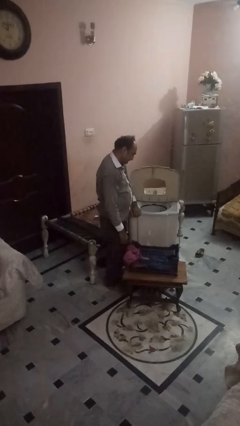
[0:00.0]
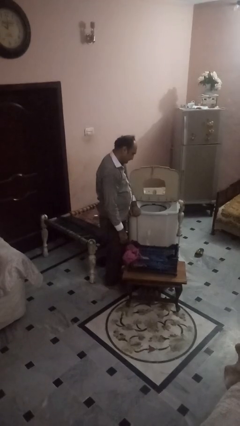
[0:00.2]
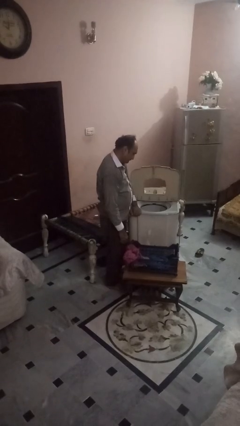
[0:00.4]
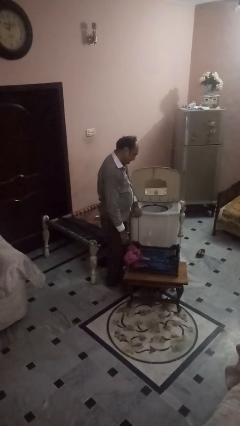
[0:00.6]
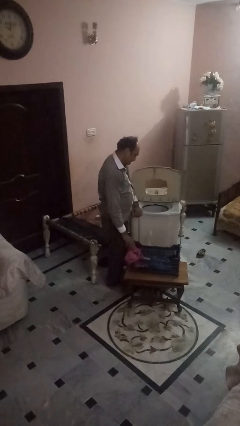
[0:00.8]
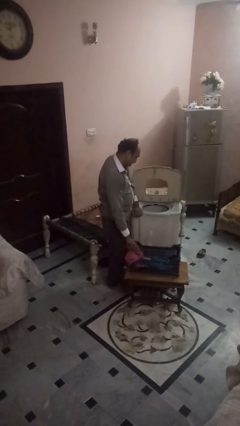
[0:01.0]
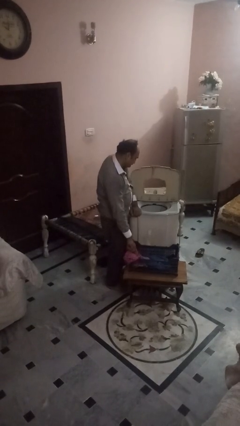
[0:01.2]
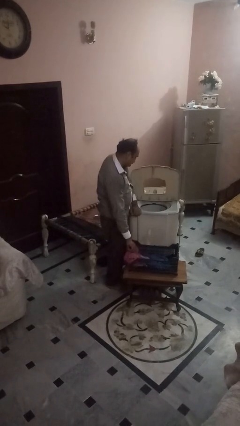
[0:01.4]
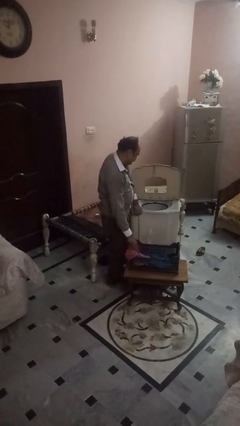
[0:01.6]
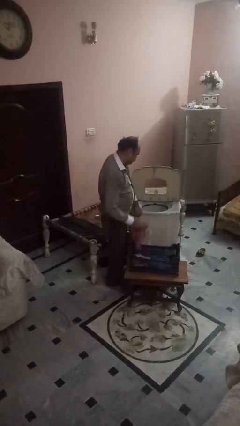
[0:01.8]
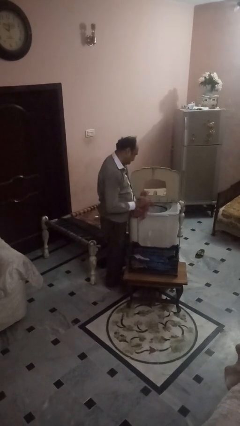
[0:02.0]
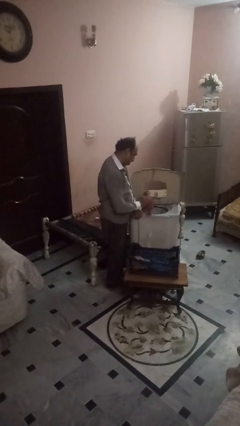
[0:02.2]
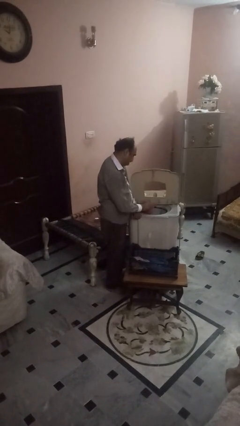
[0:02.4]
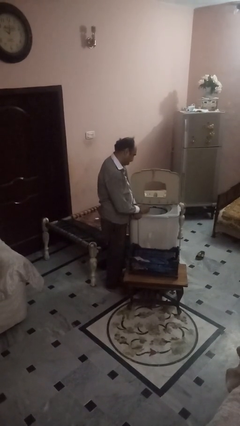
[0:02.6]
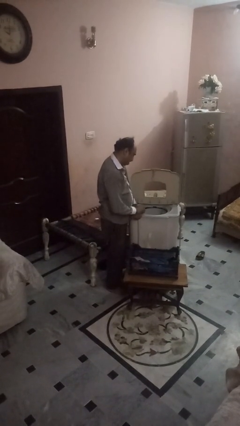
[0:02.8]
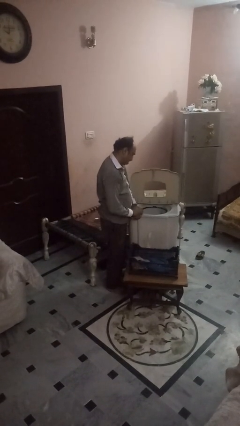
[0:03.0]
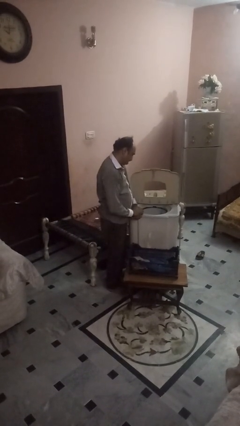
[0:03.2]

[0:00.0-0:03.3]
person loads dryer

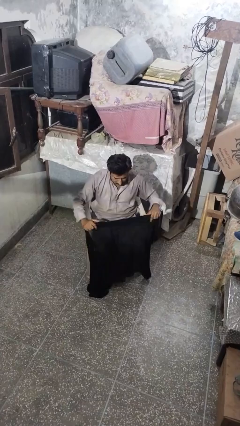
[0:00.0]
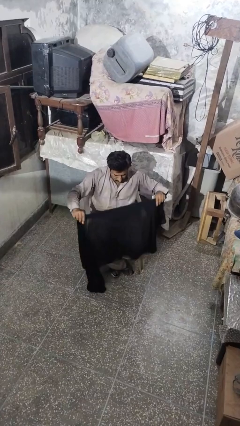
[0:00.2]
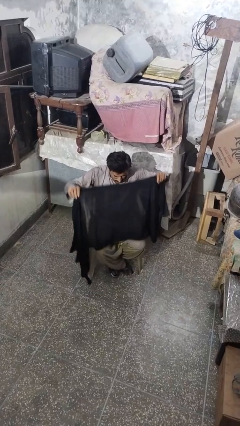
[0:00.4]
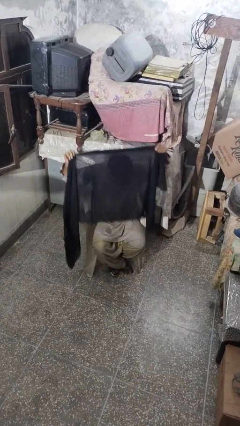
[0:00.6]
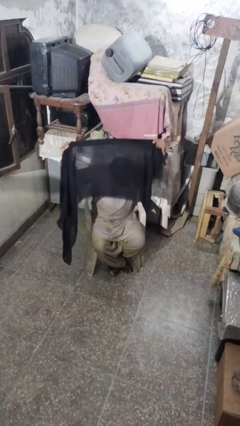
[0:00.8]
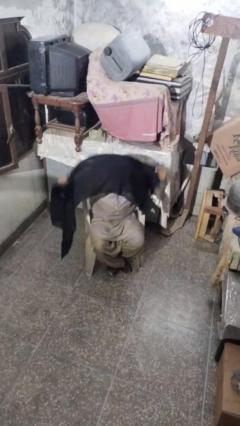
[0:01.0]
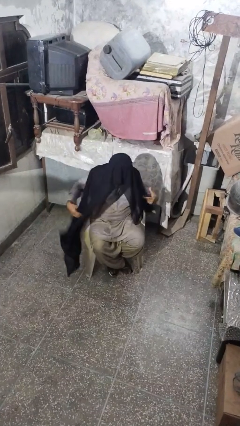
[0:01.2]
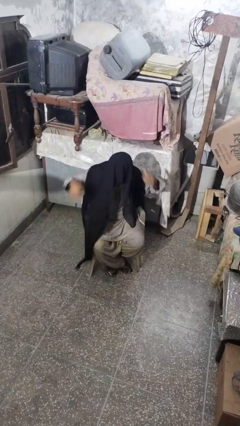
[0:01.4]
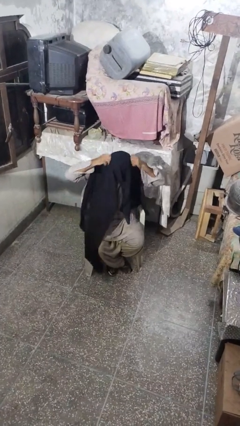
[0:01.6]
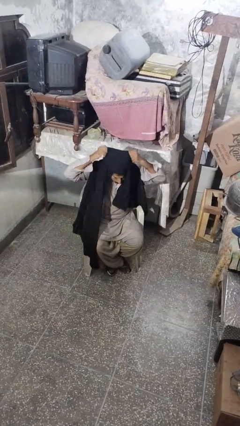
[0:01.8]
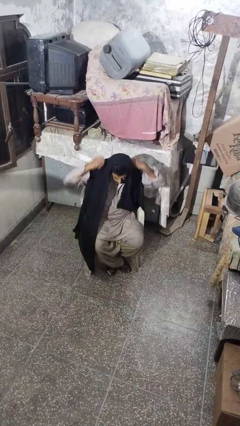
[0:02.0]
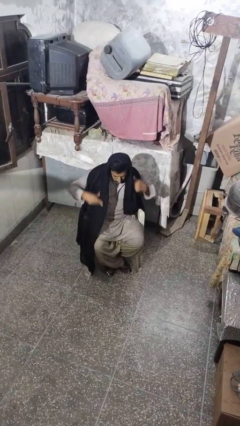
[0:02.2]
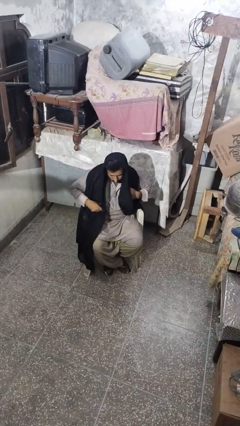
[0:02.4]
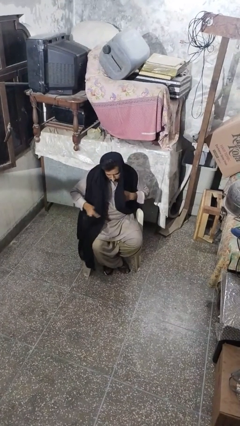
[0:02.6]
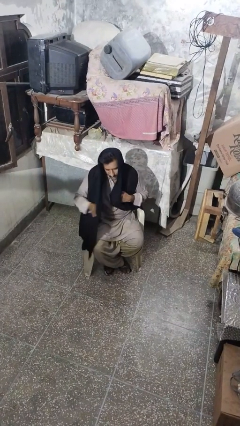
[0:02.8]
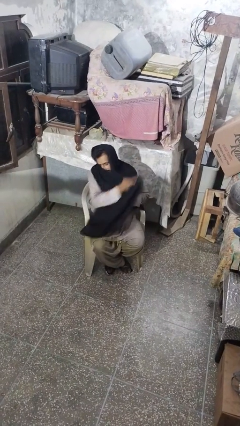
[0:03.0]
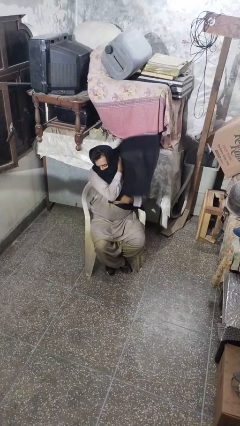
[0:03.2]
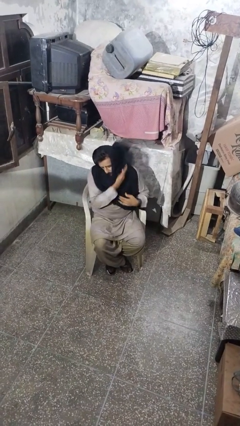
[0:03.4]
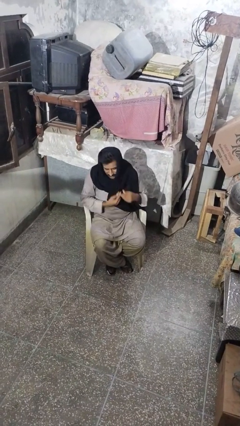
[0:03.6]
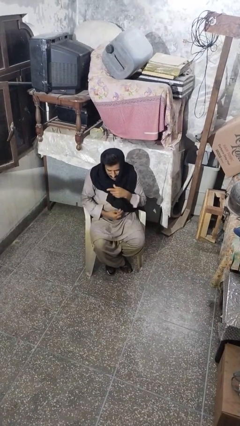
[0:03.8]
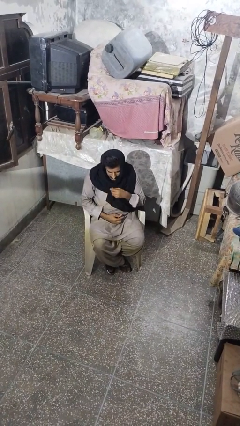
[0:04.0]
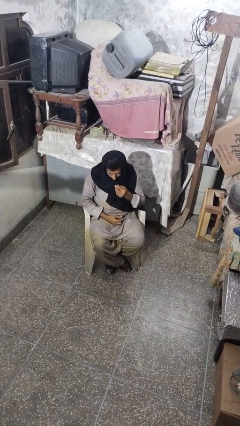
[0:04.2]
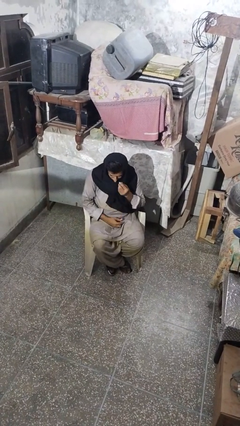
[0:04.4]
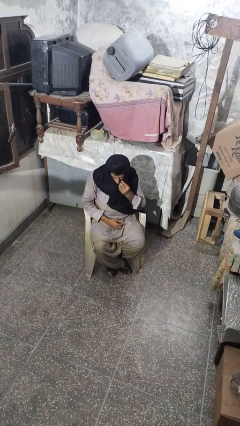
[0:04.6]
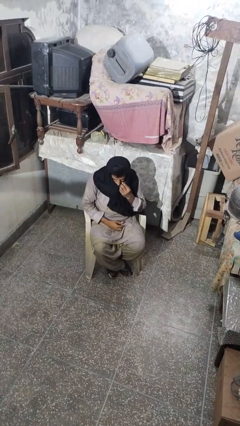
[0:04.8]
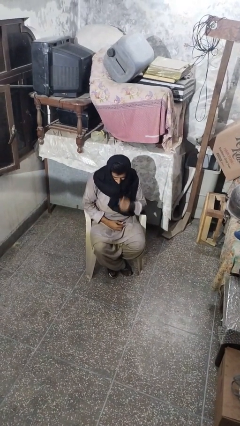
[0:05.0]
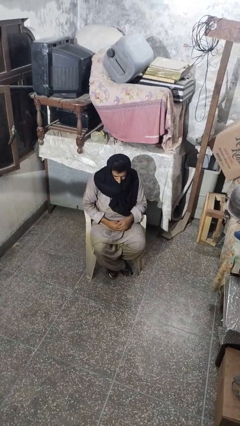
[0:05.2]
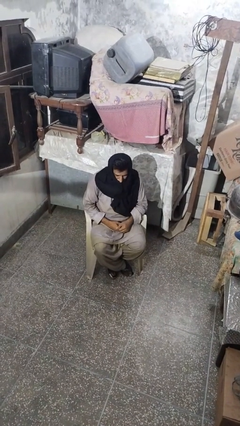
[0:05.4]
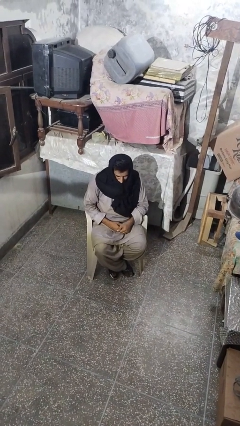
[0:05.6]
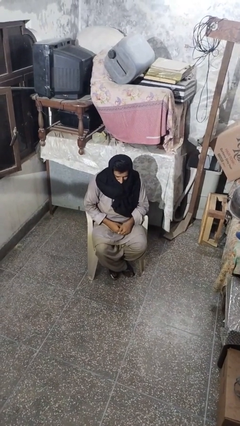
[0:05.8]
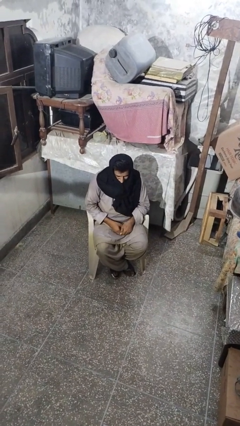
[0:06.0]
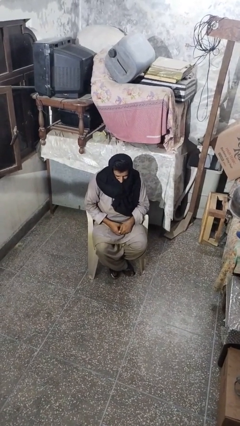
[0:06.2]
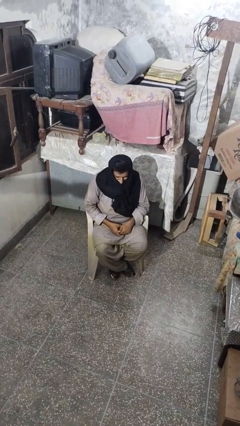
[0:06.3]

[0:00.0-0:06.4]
person puts on scarf

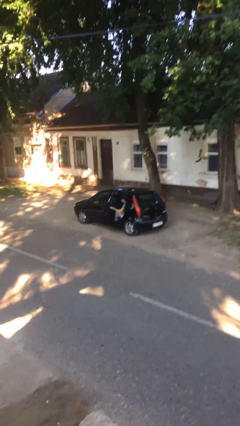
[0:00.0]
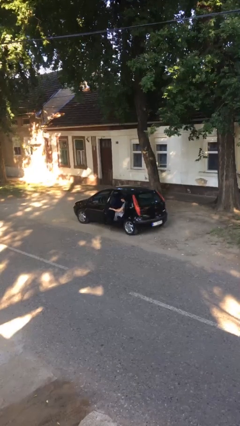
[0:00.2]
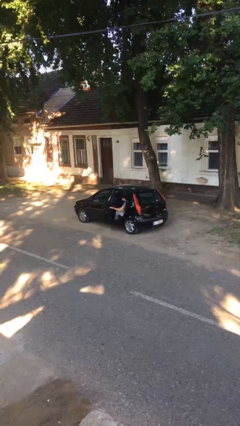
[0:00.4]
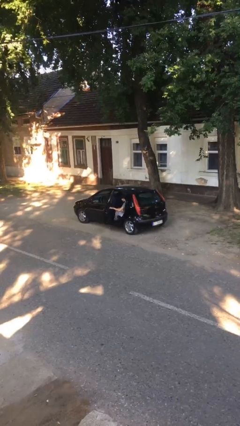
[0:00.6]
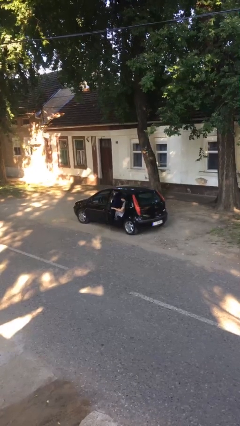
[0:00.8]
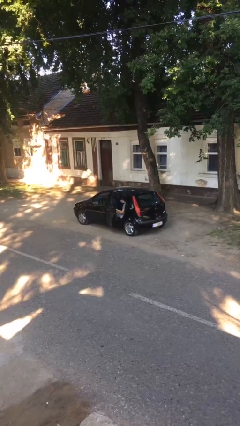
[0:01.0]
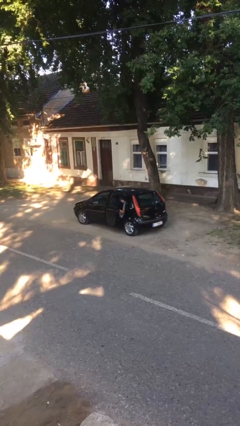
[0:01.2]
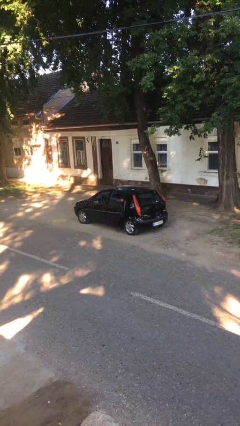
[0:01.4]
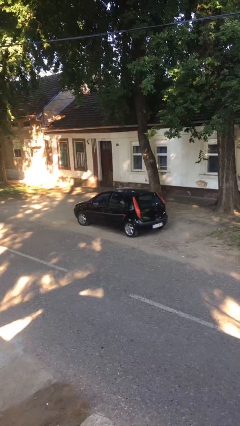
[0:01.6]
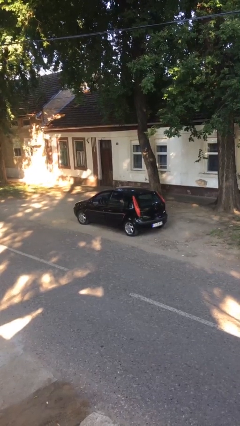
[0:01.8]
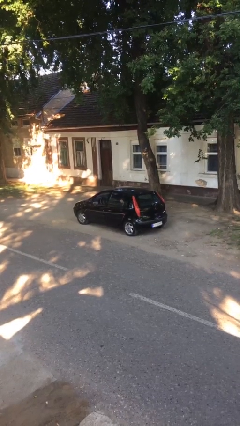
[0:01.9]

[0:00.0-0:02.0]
person closes car door

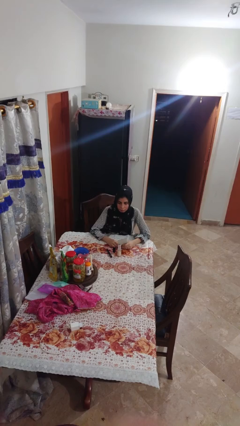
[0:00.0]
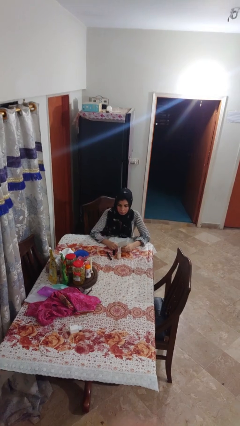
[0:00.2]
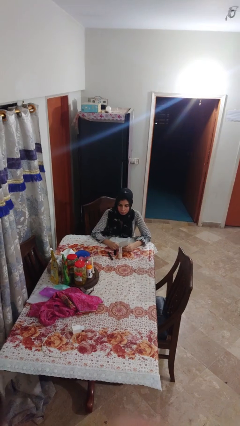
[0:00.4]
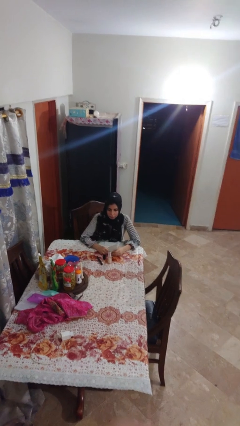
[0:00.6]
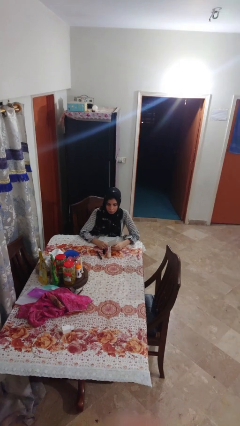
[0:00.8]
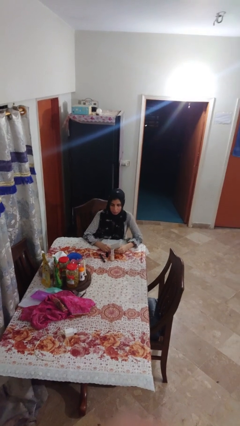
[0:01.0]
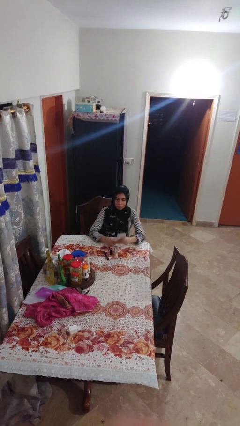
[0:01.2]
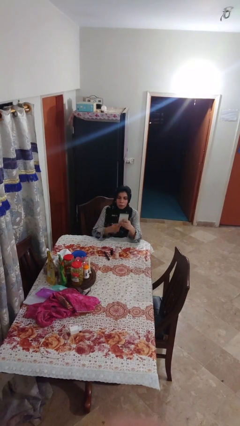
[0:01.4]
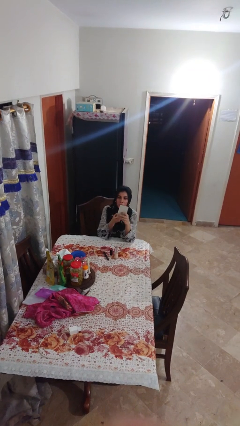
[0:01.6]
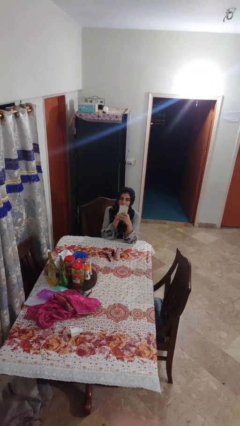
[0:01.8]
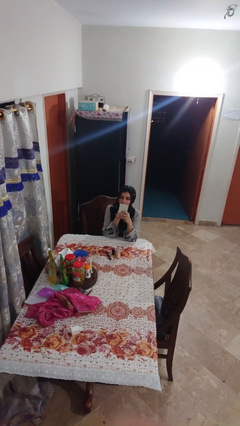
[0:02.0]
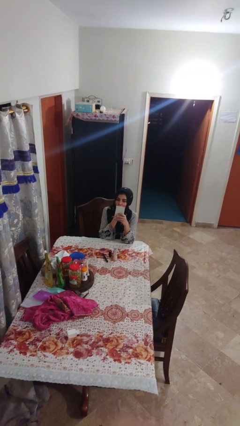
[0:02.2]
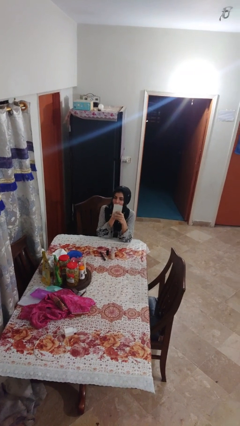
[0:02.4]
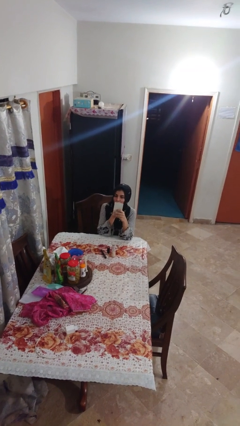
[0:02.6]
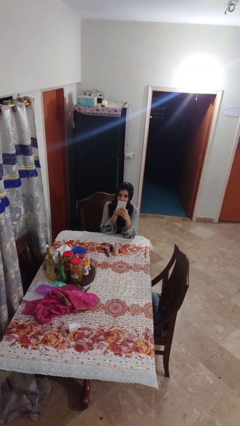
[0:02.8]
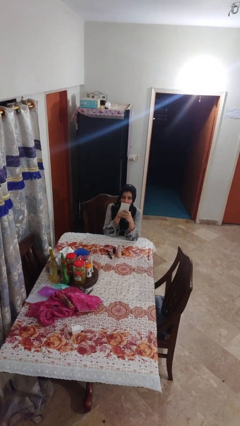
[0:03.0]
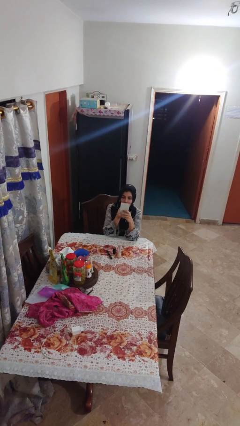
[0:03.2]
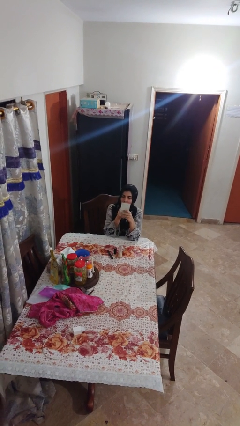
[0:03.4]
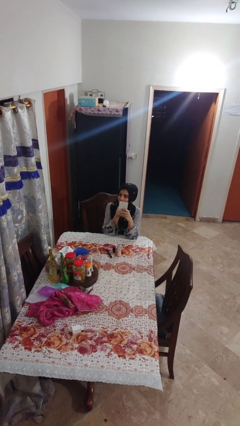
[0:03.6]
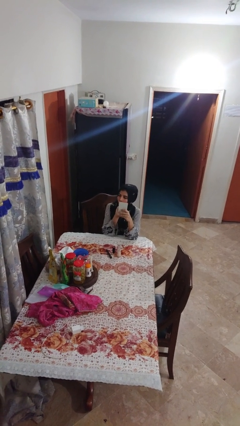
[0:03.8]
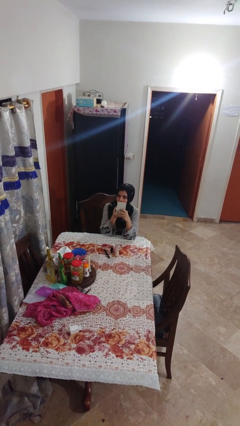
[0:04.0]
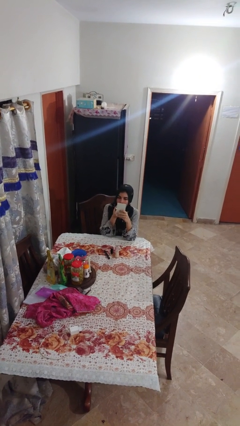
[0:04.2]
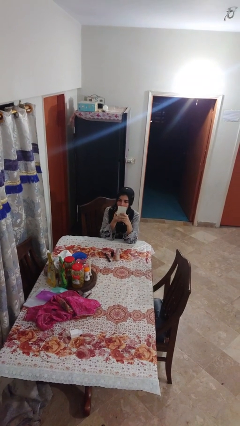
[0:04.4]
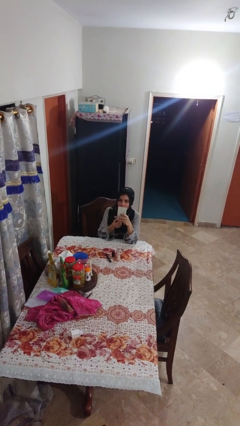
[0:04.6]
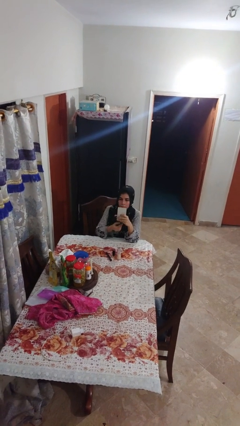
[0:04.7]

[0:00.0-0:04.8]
person applies lip makeup

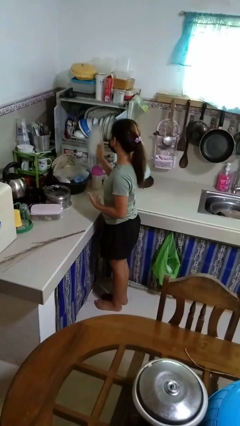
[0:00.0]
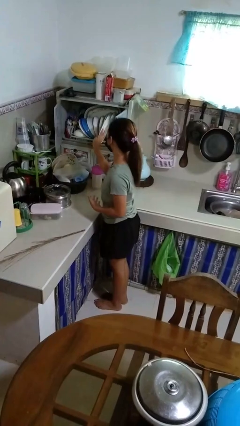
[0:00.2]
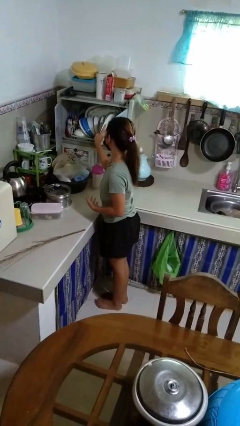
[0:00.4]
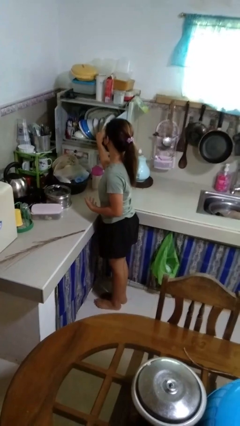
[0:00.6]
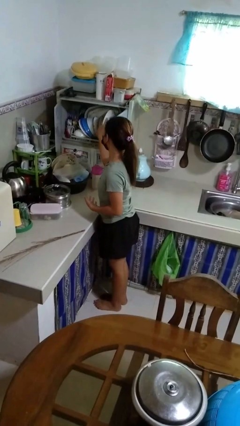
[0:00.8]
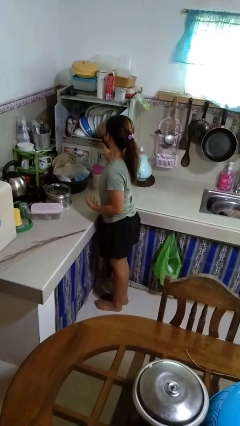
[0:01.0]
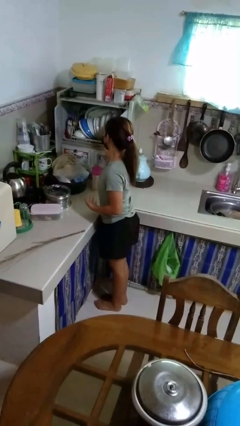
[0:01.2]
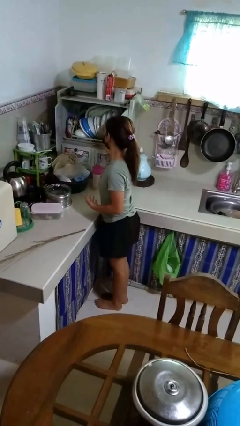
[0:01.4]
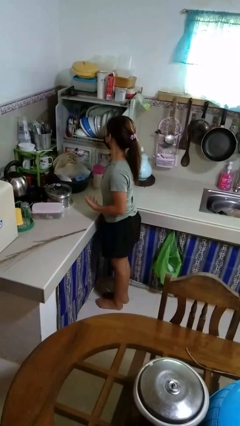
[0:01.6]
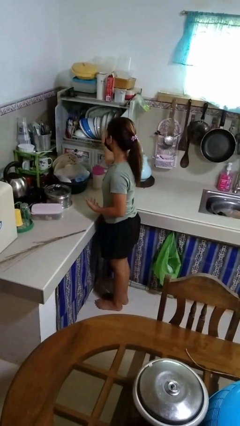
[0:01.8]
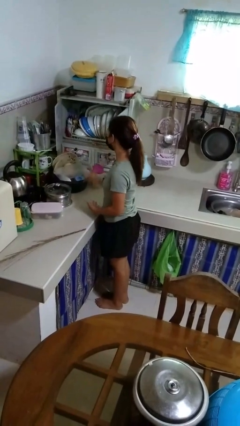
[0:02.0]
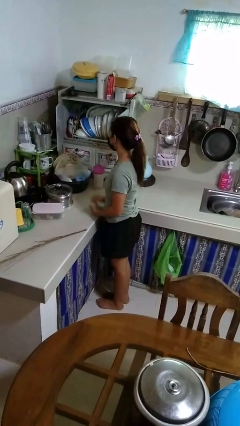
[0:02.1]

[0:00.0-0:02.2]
person puts object into kitchen drawer
